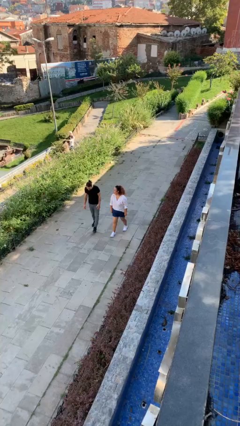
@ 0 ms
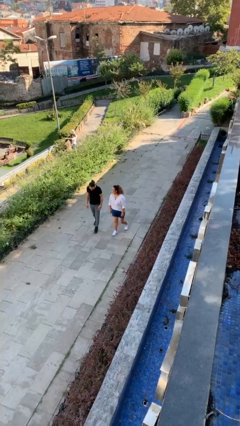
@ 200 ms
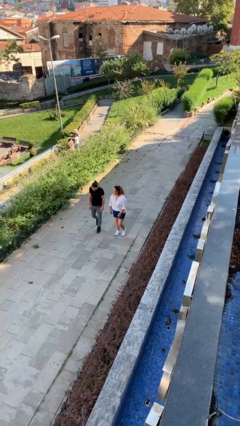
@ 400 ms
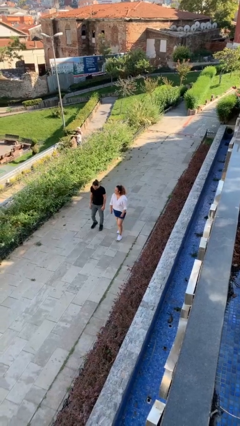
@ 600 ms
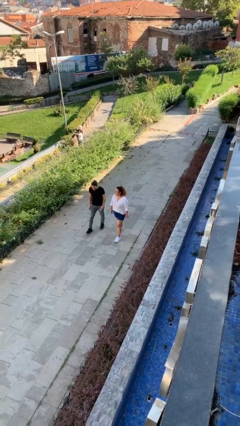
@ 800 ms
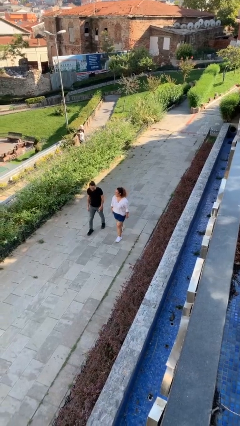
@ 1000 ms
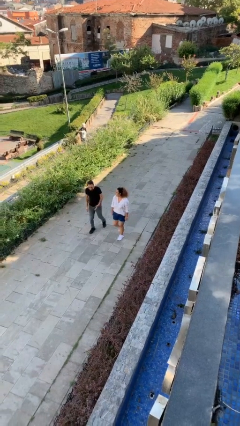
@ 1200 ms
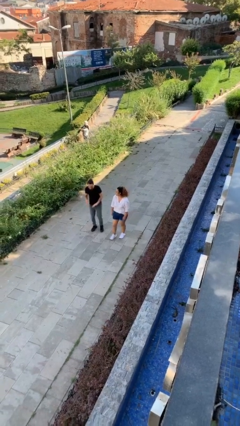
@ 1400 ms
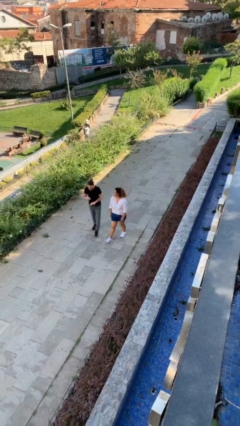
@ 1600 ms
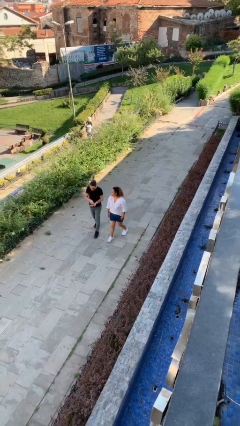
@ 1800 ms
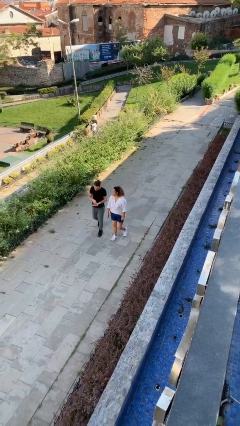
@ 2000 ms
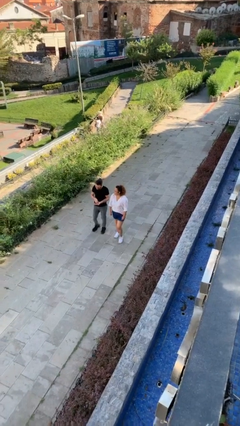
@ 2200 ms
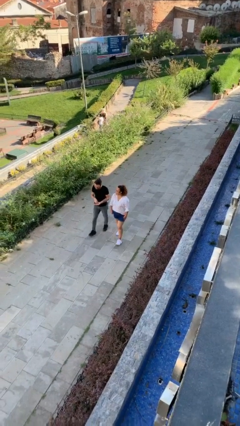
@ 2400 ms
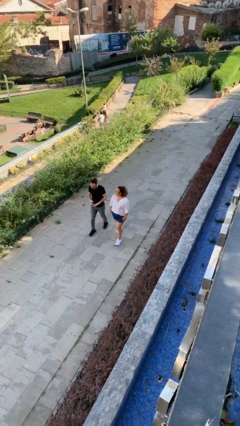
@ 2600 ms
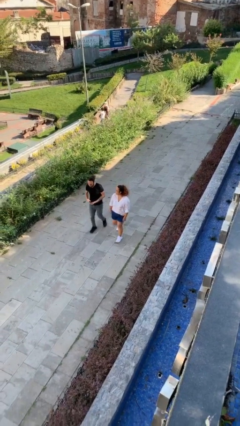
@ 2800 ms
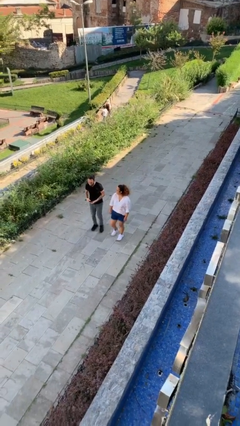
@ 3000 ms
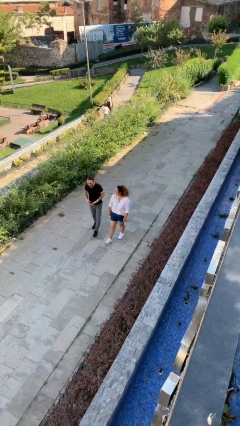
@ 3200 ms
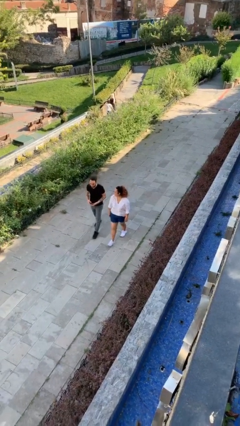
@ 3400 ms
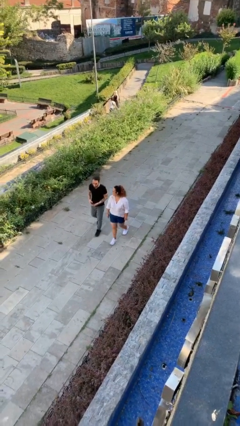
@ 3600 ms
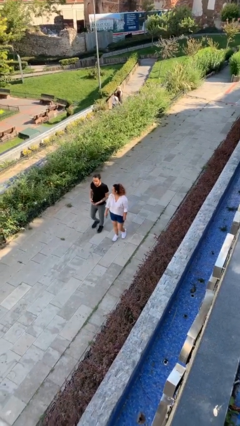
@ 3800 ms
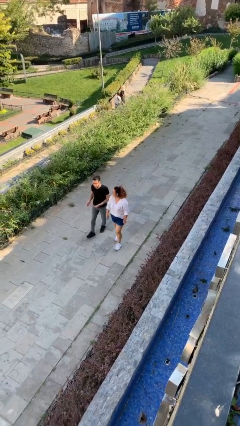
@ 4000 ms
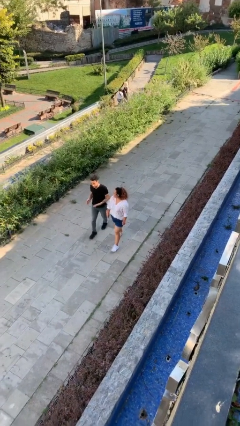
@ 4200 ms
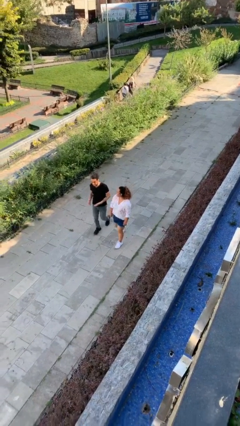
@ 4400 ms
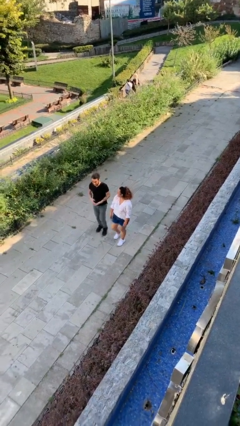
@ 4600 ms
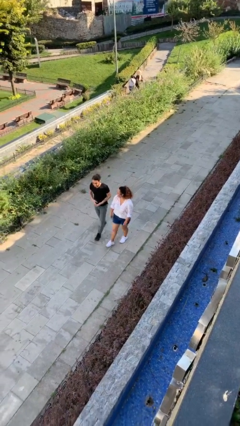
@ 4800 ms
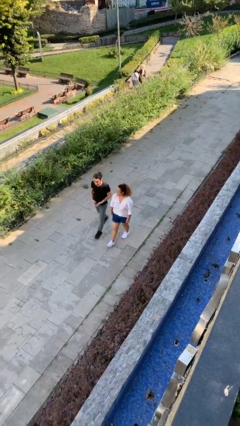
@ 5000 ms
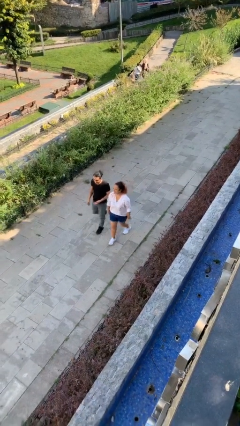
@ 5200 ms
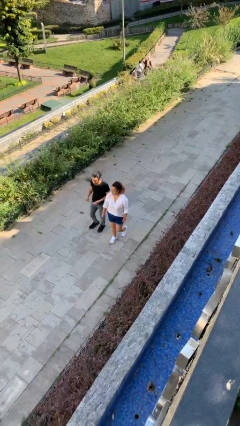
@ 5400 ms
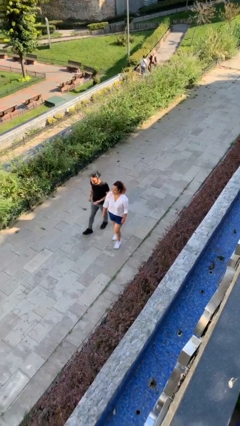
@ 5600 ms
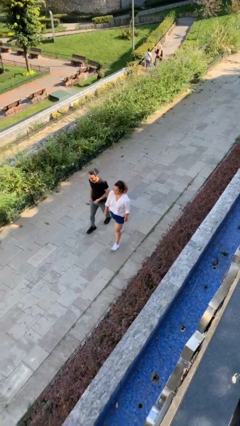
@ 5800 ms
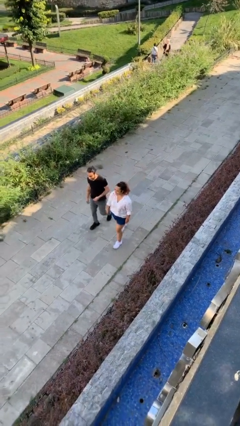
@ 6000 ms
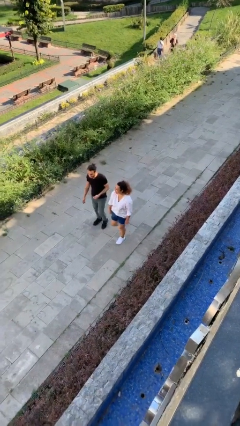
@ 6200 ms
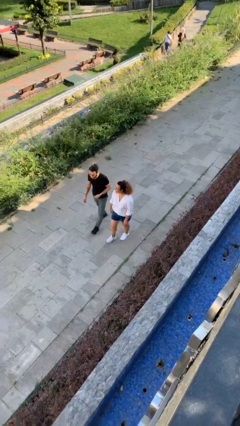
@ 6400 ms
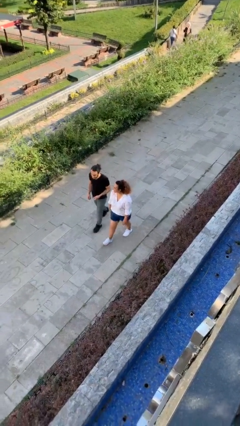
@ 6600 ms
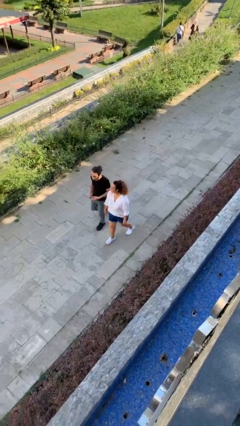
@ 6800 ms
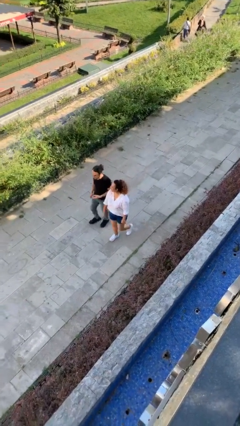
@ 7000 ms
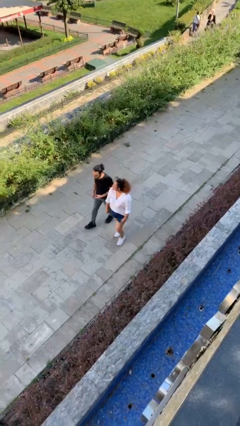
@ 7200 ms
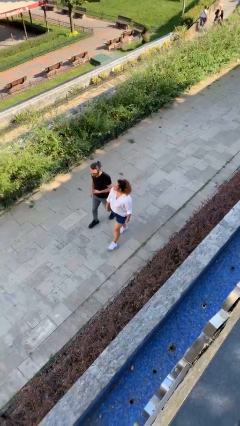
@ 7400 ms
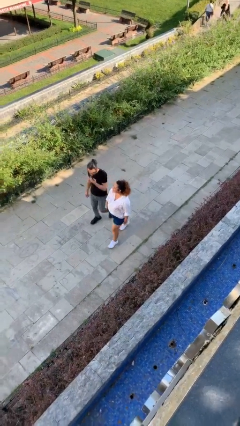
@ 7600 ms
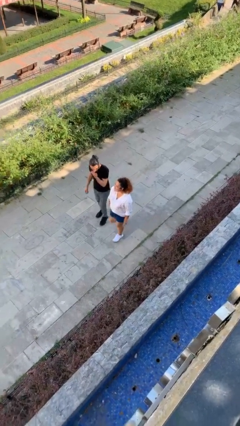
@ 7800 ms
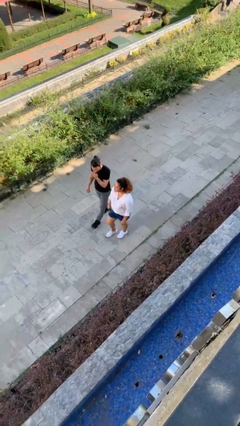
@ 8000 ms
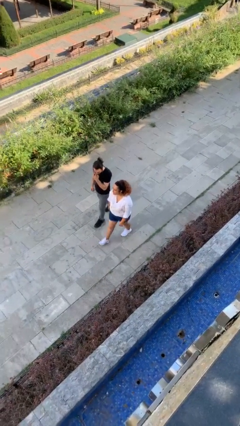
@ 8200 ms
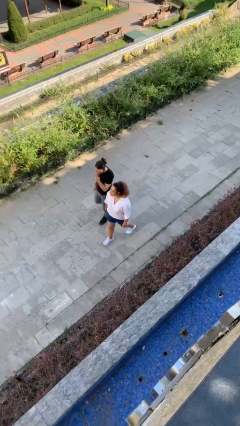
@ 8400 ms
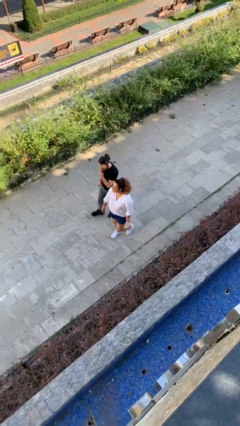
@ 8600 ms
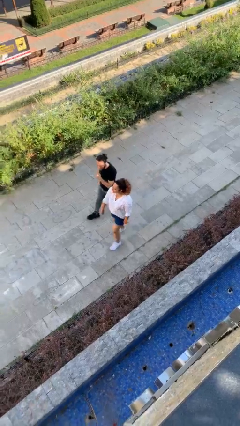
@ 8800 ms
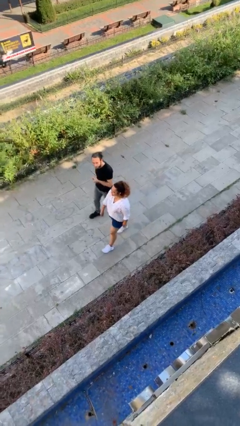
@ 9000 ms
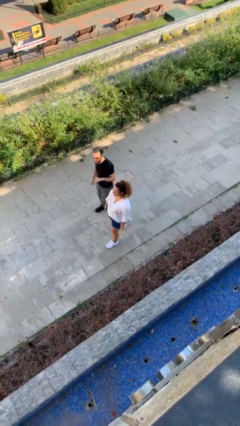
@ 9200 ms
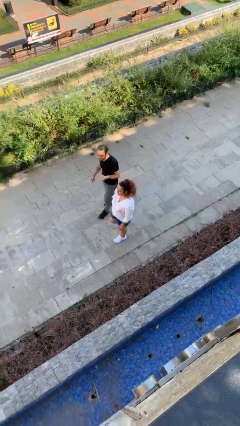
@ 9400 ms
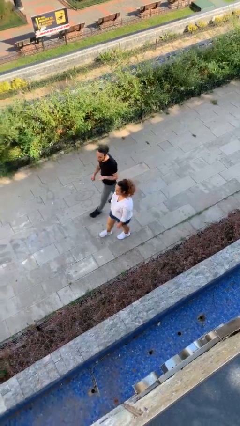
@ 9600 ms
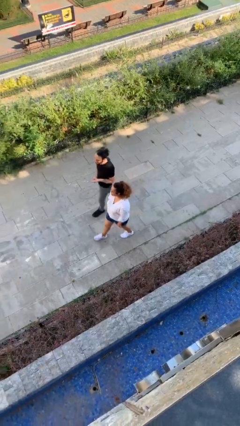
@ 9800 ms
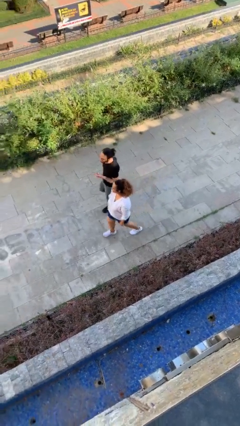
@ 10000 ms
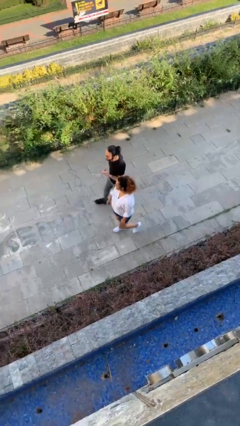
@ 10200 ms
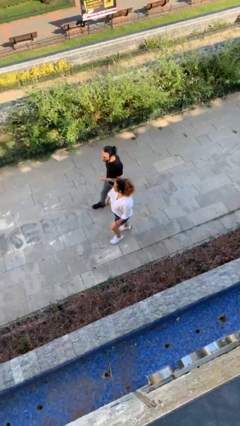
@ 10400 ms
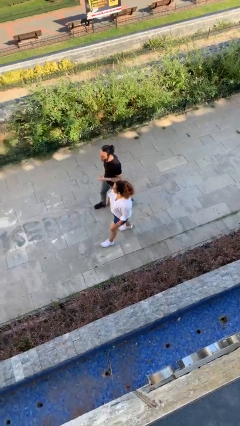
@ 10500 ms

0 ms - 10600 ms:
person talks to person

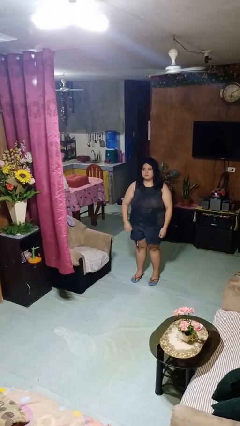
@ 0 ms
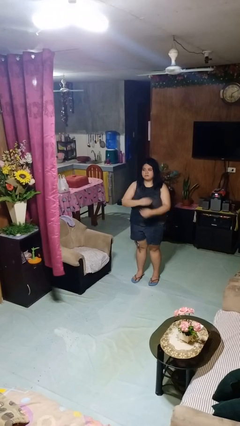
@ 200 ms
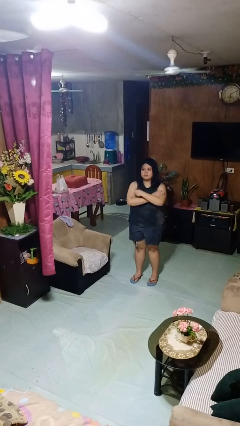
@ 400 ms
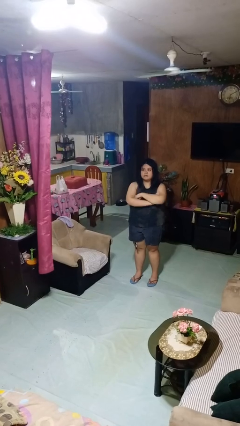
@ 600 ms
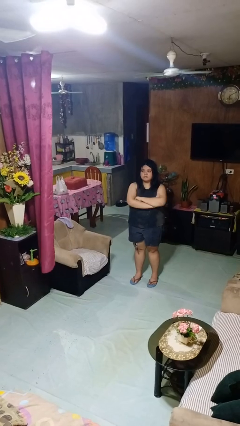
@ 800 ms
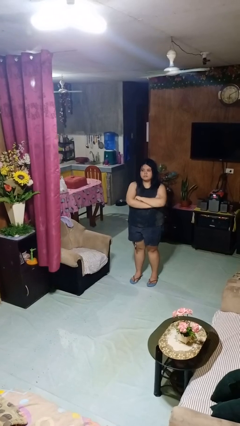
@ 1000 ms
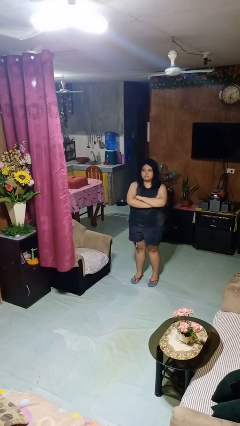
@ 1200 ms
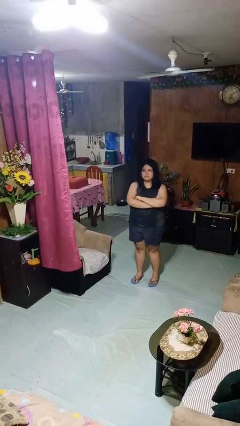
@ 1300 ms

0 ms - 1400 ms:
person crosses arms

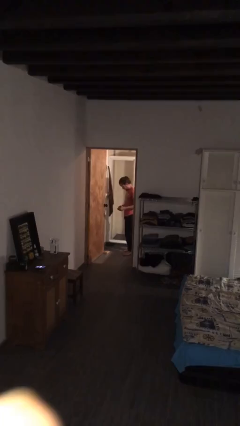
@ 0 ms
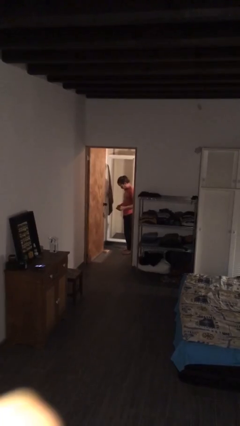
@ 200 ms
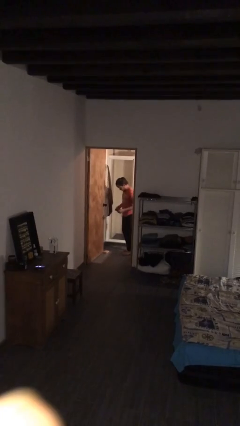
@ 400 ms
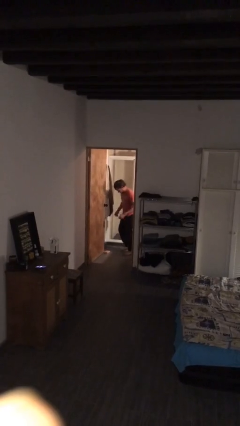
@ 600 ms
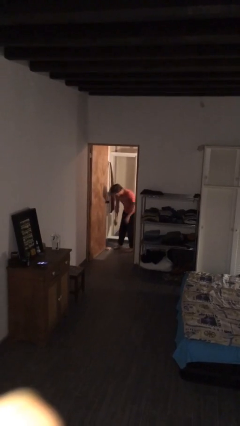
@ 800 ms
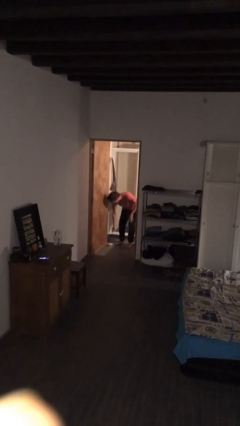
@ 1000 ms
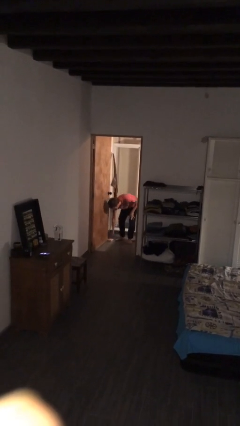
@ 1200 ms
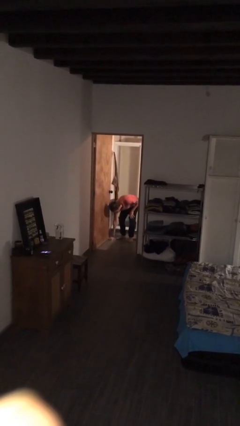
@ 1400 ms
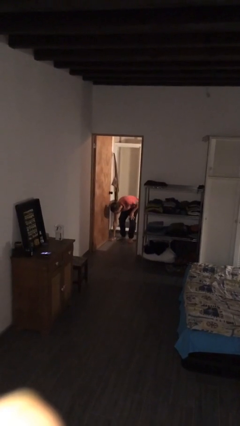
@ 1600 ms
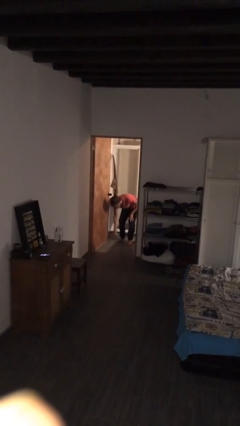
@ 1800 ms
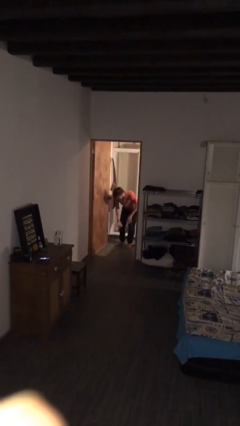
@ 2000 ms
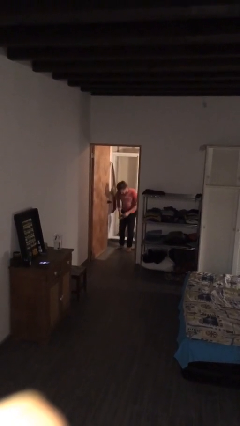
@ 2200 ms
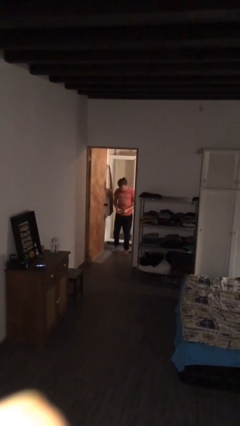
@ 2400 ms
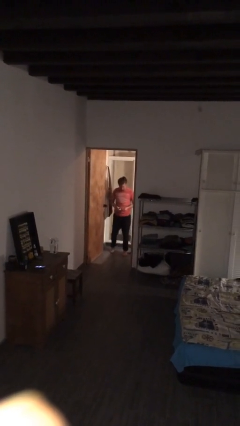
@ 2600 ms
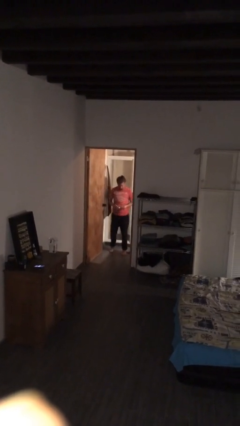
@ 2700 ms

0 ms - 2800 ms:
person picks up object from floor

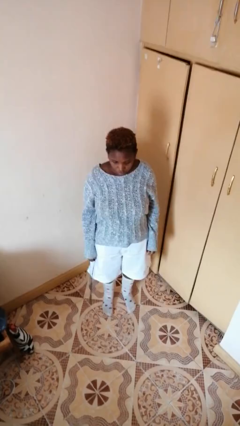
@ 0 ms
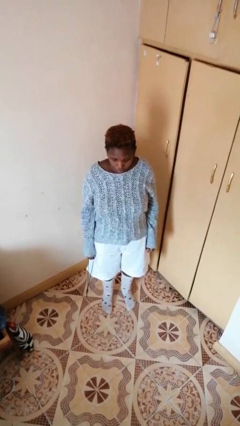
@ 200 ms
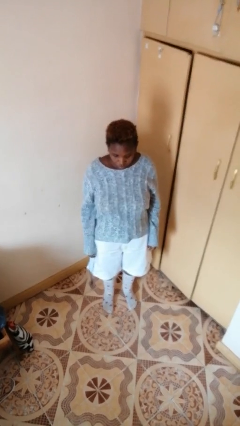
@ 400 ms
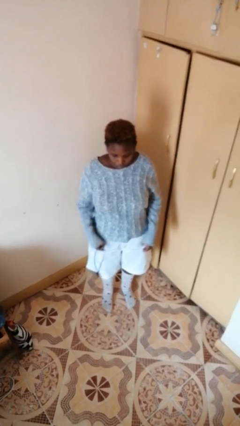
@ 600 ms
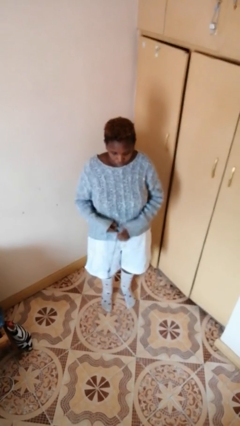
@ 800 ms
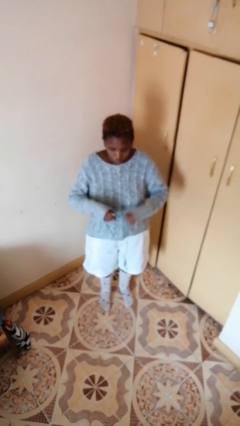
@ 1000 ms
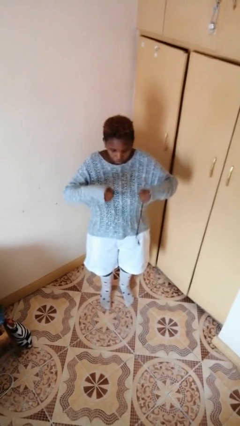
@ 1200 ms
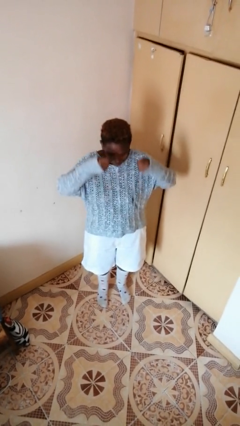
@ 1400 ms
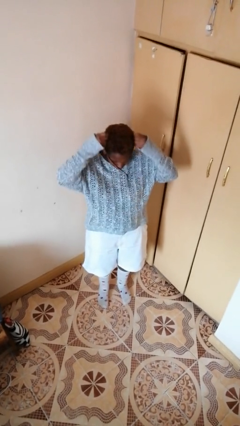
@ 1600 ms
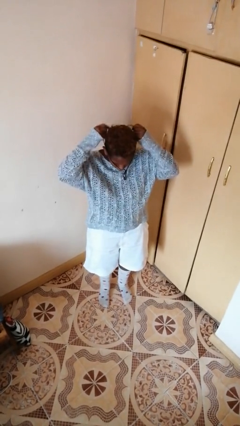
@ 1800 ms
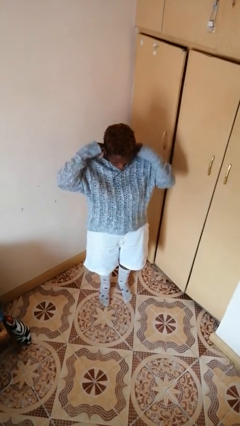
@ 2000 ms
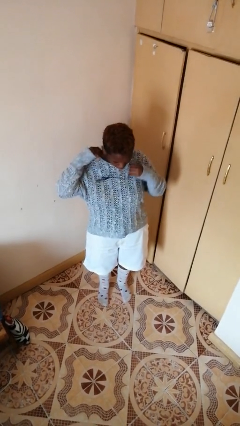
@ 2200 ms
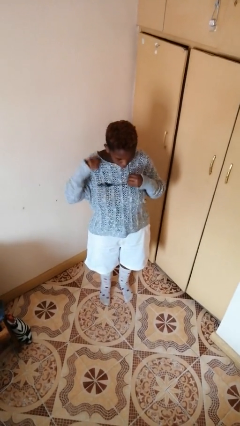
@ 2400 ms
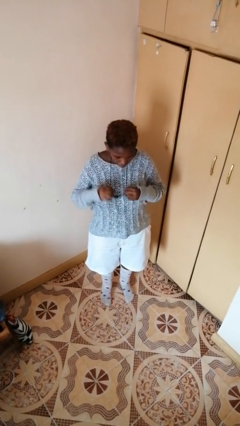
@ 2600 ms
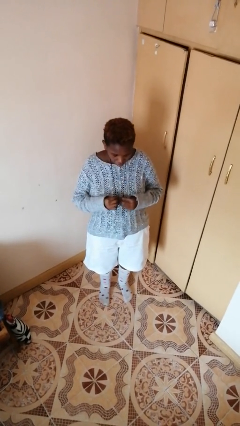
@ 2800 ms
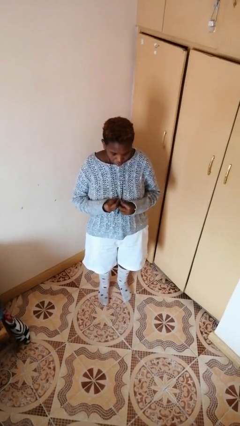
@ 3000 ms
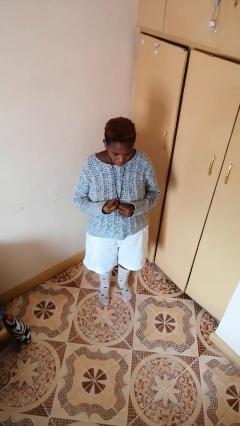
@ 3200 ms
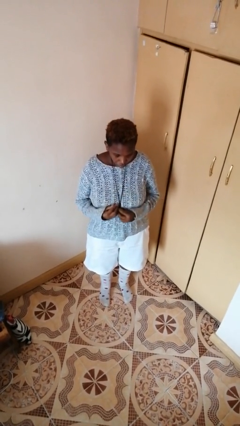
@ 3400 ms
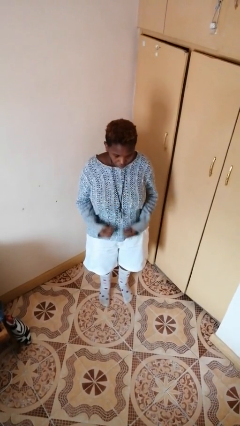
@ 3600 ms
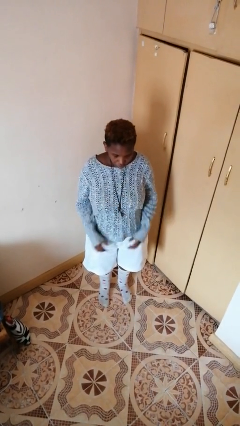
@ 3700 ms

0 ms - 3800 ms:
person puts on necklace
